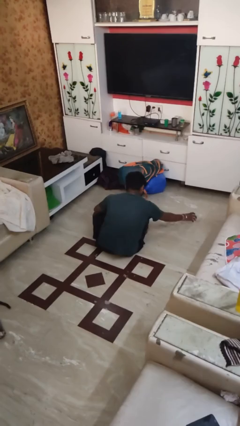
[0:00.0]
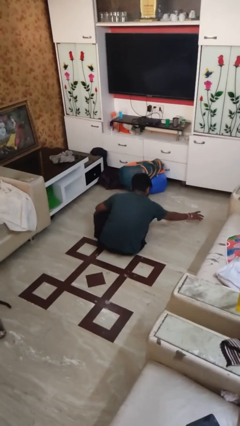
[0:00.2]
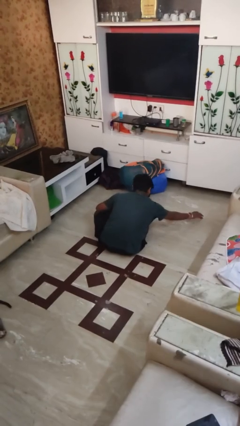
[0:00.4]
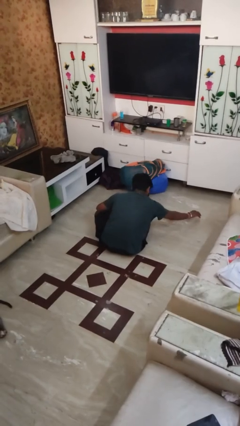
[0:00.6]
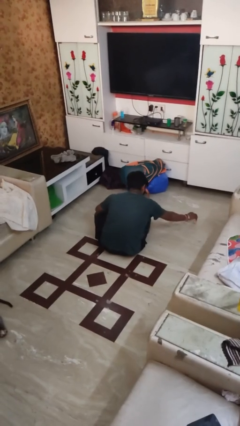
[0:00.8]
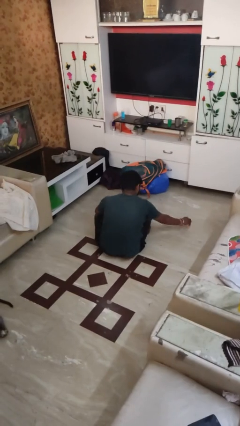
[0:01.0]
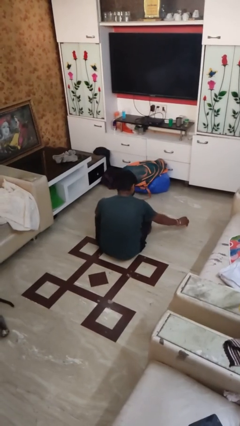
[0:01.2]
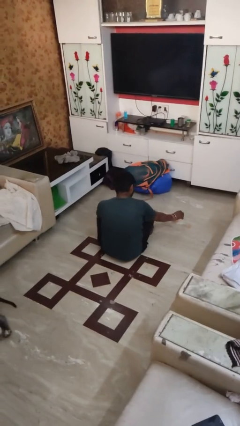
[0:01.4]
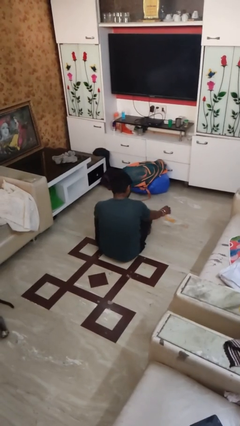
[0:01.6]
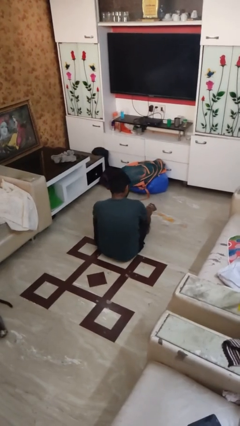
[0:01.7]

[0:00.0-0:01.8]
person sets upright glass

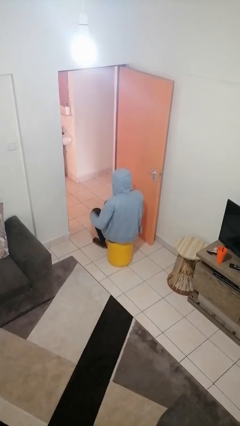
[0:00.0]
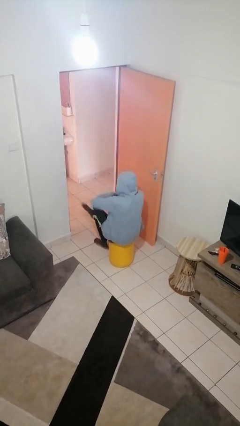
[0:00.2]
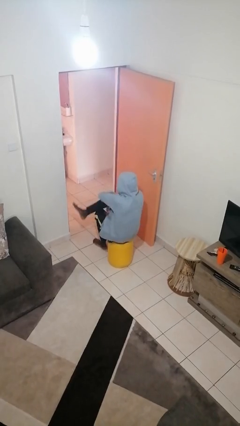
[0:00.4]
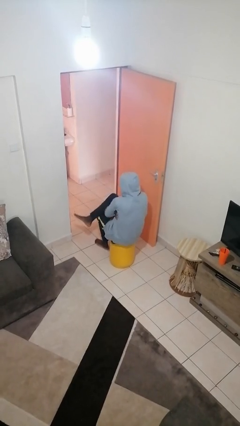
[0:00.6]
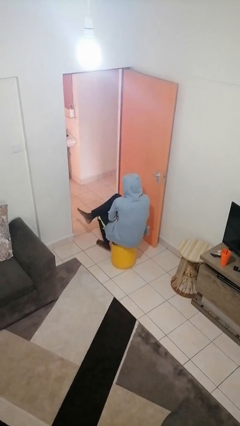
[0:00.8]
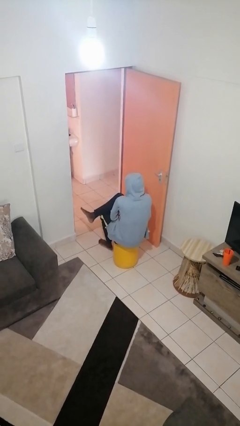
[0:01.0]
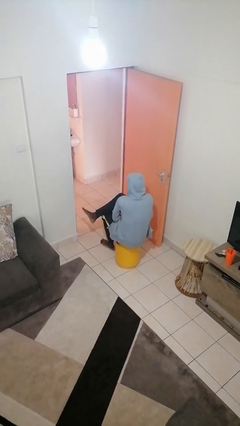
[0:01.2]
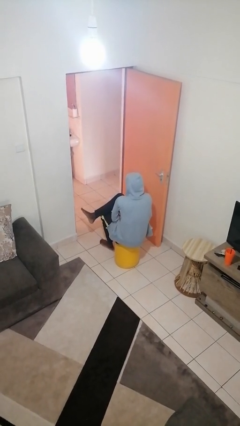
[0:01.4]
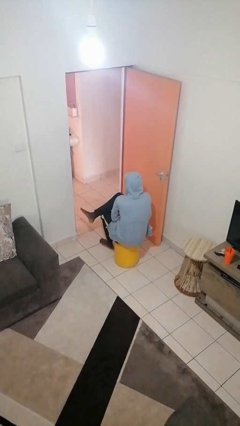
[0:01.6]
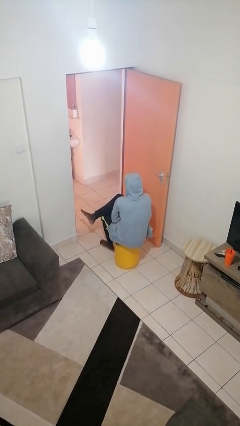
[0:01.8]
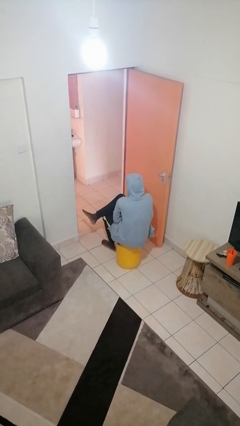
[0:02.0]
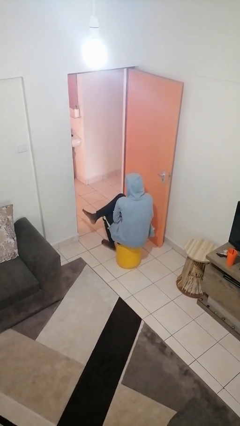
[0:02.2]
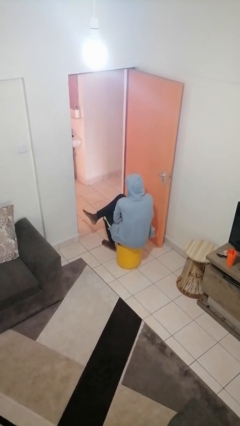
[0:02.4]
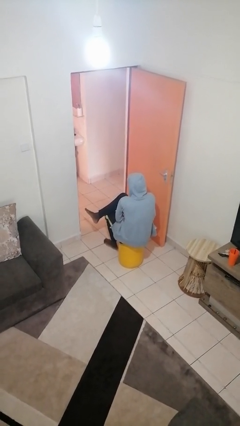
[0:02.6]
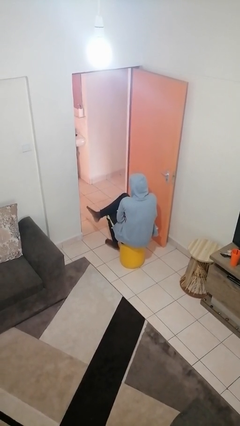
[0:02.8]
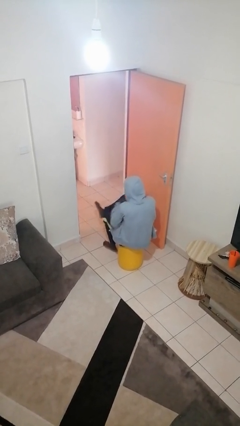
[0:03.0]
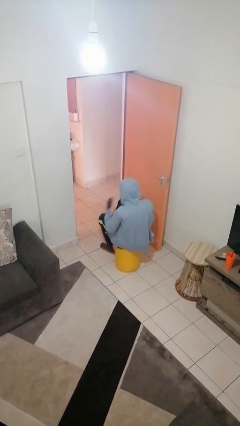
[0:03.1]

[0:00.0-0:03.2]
person crosses arms

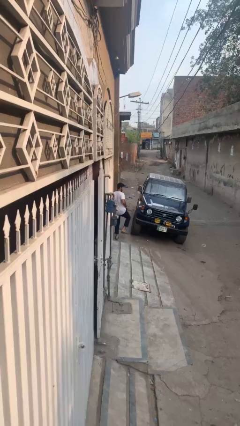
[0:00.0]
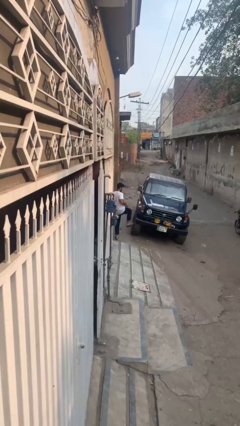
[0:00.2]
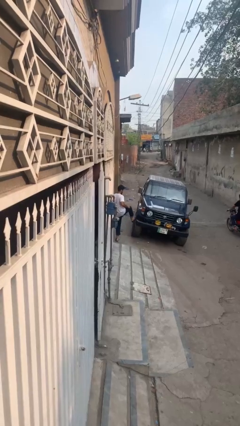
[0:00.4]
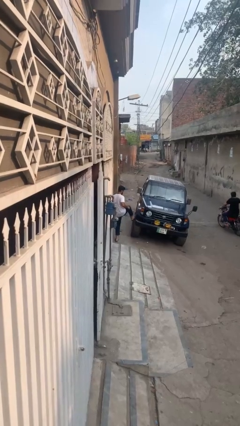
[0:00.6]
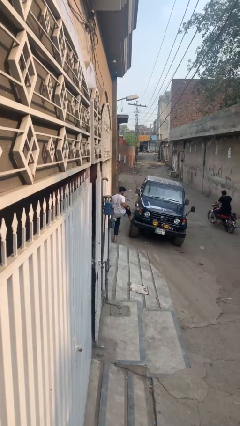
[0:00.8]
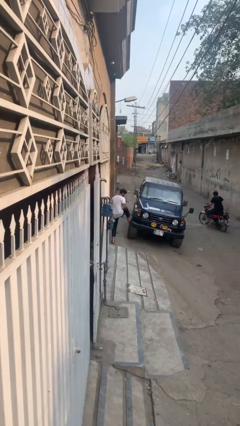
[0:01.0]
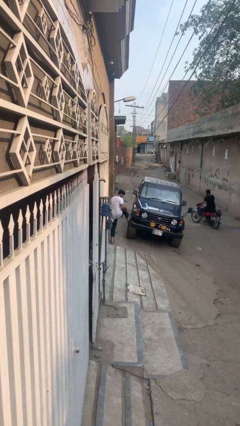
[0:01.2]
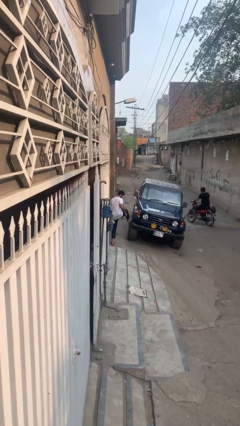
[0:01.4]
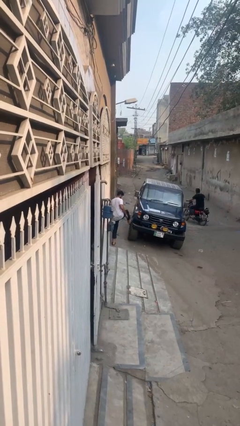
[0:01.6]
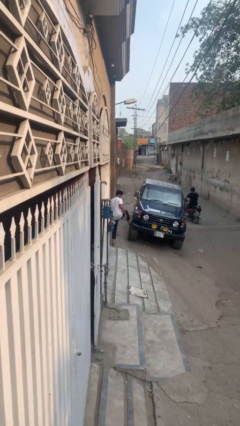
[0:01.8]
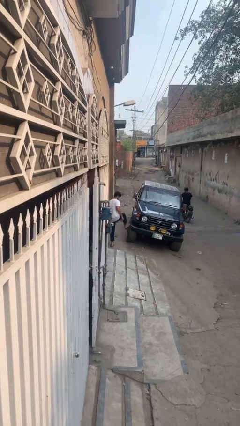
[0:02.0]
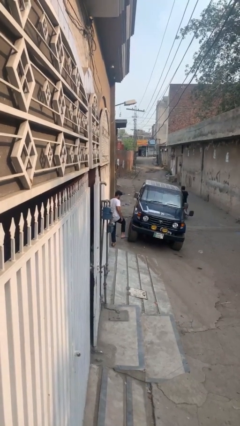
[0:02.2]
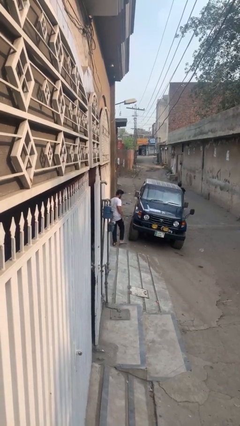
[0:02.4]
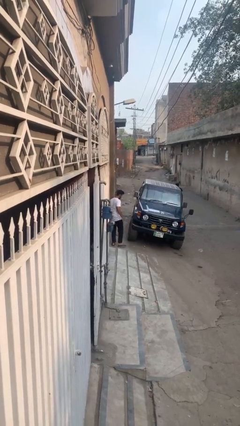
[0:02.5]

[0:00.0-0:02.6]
person kicks car tires

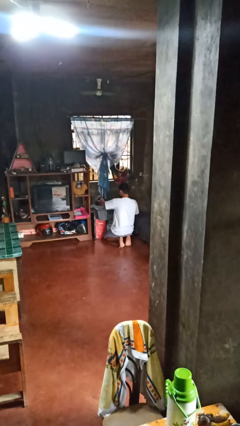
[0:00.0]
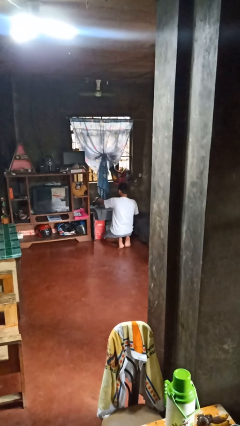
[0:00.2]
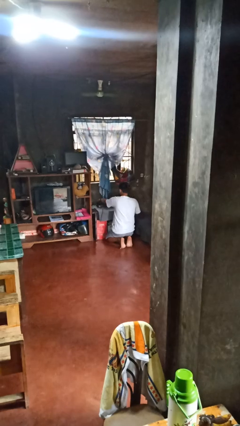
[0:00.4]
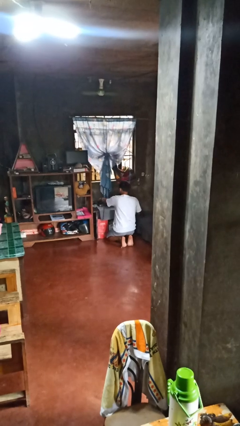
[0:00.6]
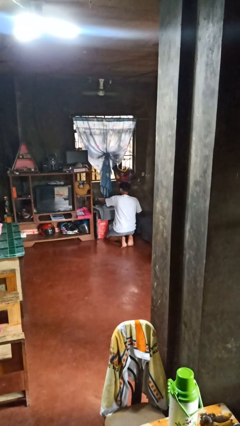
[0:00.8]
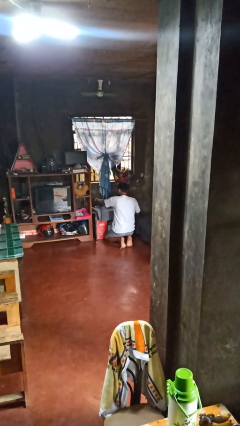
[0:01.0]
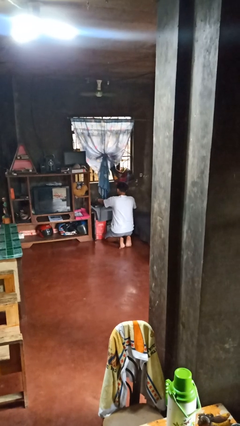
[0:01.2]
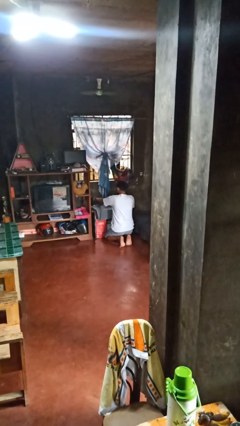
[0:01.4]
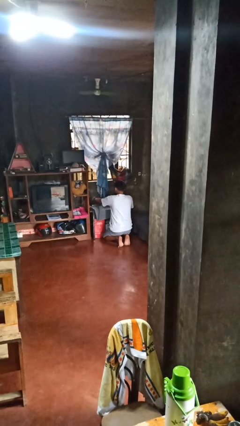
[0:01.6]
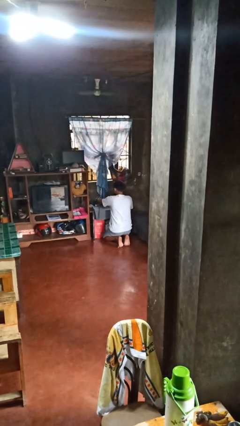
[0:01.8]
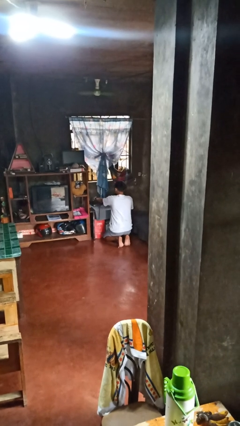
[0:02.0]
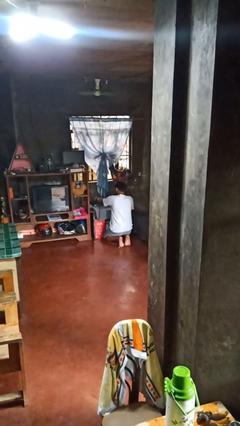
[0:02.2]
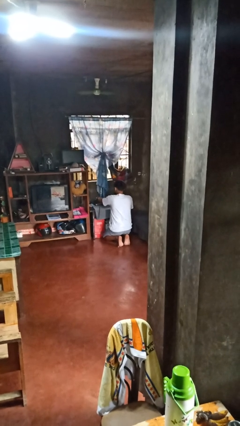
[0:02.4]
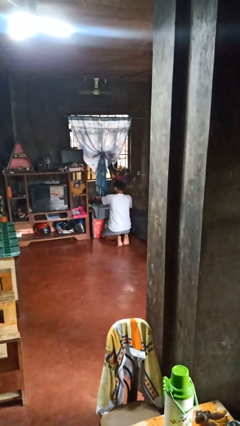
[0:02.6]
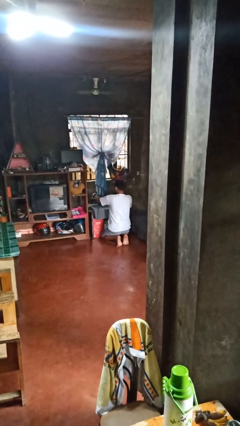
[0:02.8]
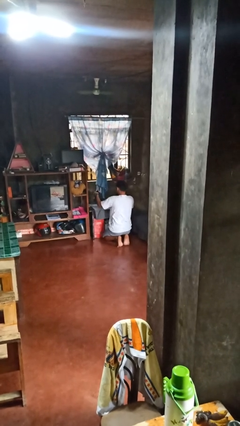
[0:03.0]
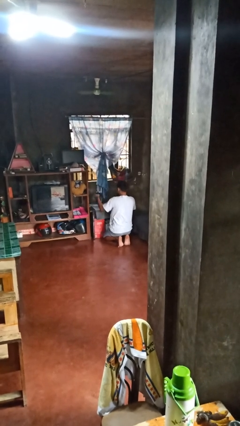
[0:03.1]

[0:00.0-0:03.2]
person irons clothes

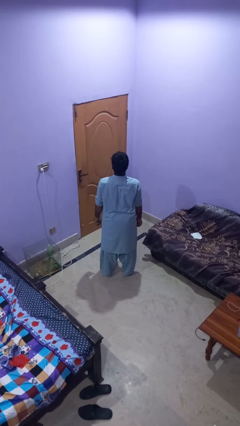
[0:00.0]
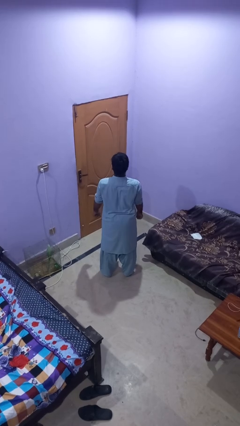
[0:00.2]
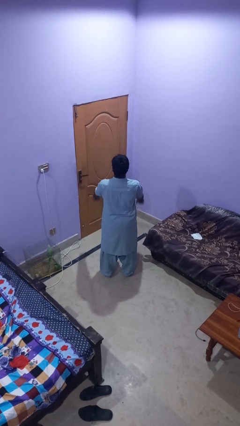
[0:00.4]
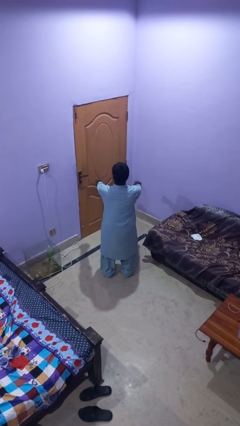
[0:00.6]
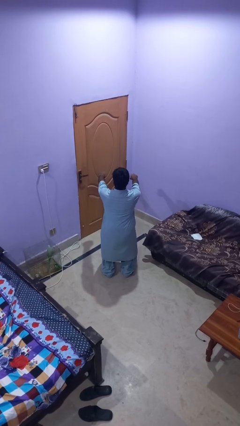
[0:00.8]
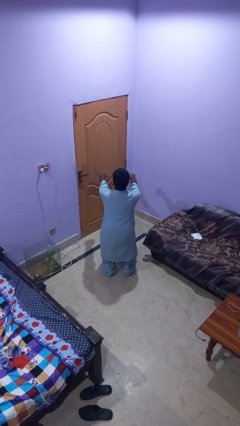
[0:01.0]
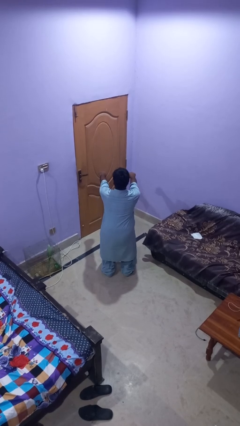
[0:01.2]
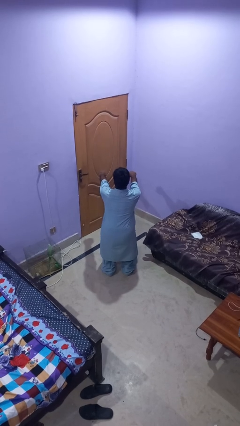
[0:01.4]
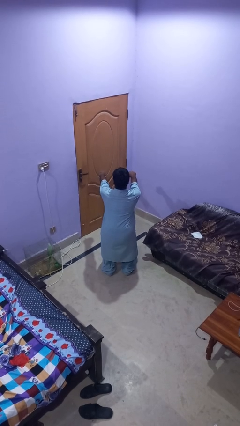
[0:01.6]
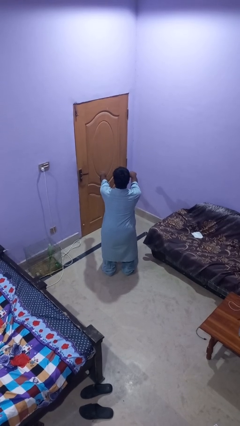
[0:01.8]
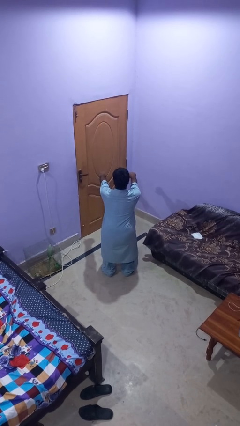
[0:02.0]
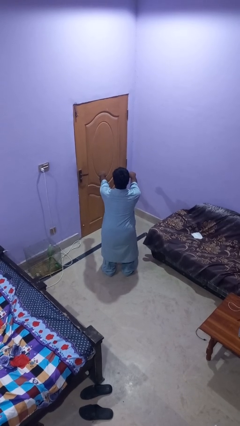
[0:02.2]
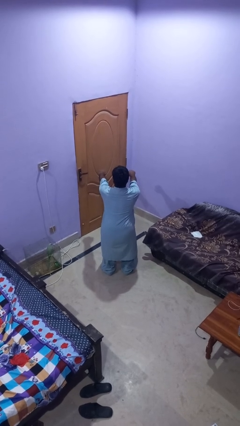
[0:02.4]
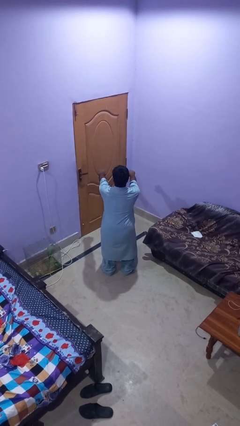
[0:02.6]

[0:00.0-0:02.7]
person squats

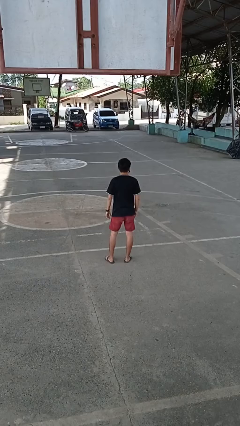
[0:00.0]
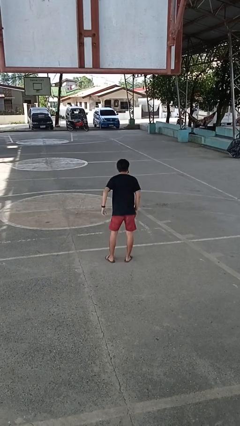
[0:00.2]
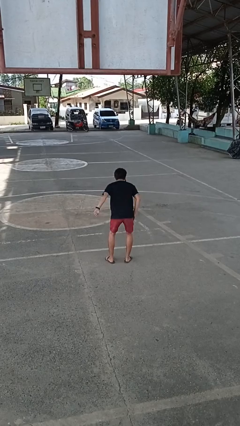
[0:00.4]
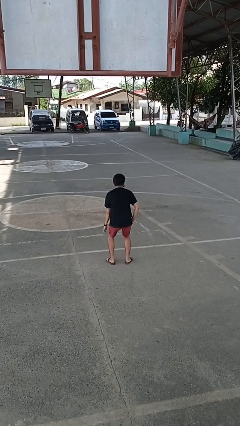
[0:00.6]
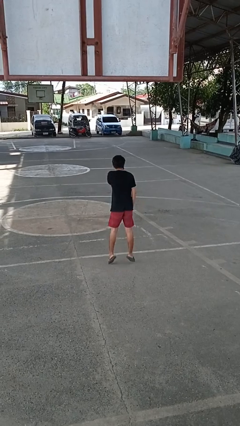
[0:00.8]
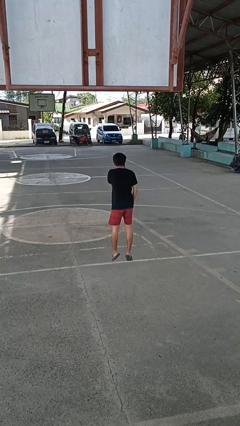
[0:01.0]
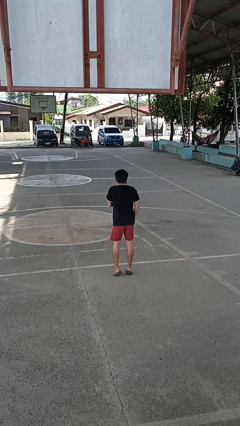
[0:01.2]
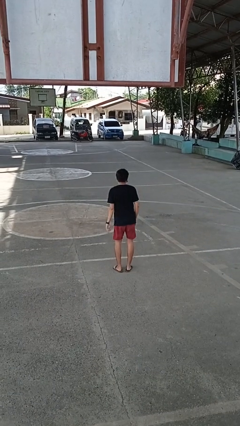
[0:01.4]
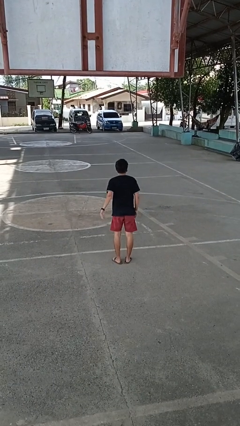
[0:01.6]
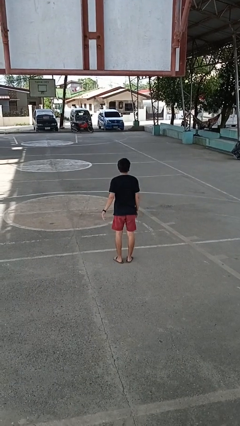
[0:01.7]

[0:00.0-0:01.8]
person jumps

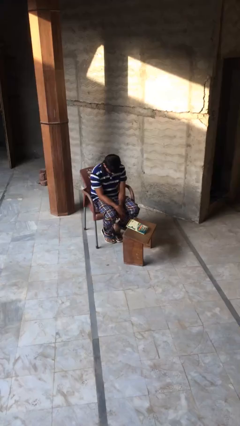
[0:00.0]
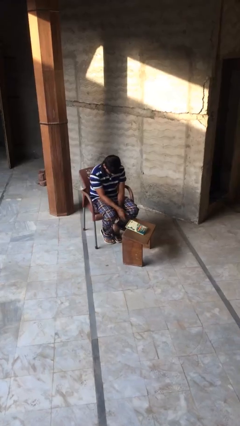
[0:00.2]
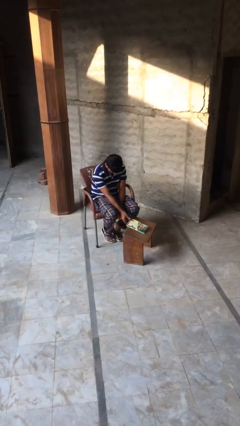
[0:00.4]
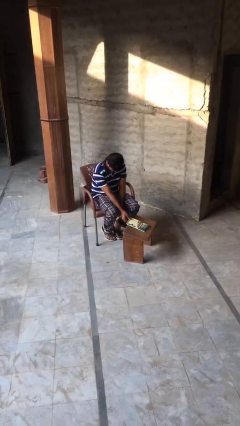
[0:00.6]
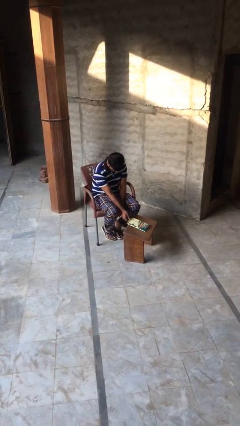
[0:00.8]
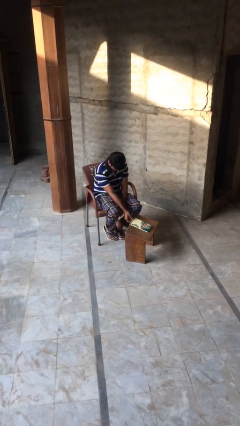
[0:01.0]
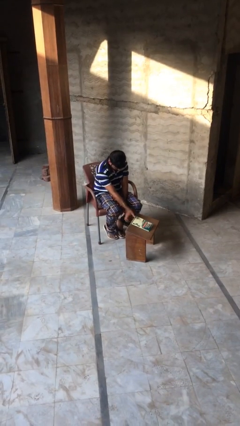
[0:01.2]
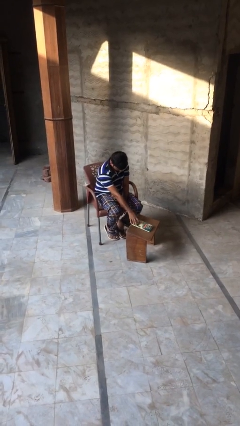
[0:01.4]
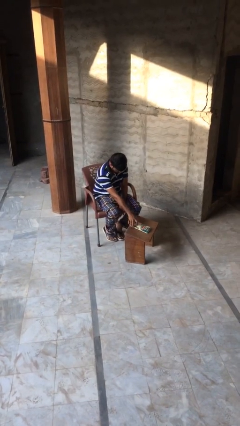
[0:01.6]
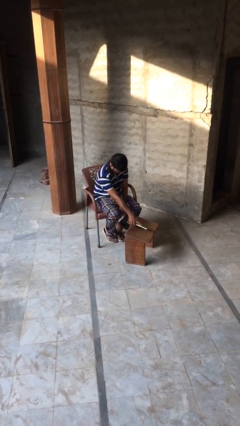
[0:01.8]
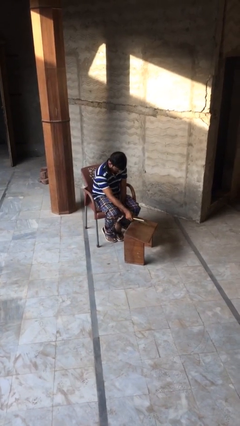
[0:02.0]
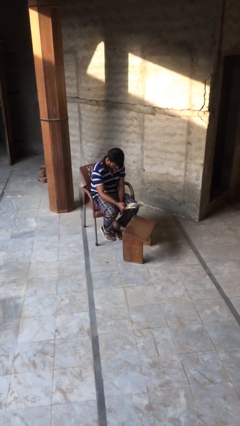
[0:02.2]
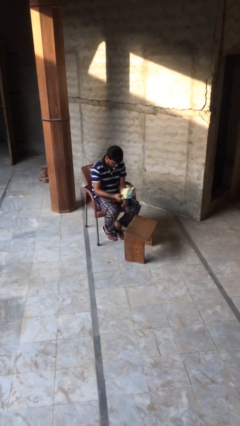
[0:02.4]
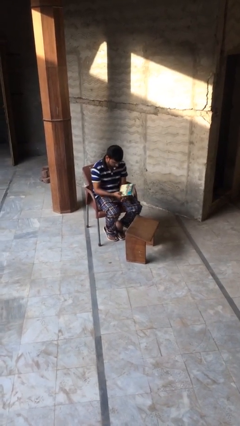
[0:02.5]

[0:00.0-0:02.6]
person picks up object from table
